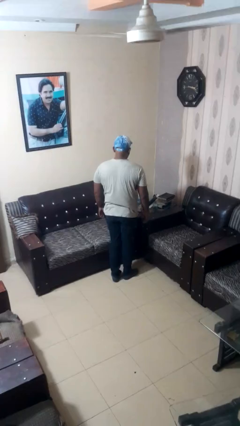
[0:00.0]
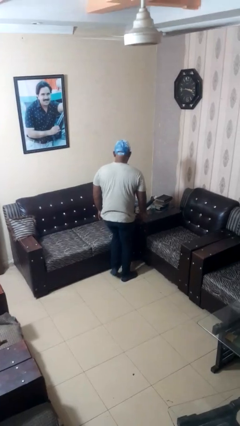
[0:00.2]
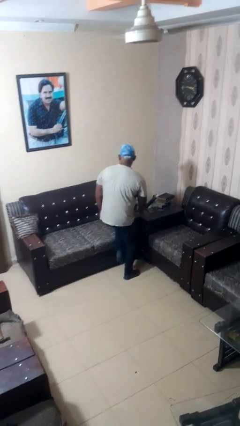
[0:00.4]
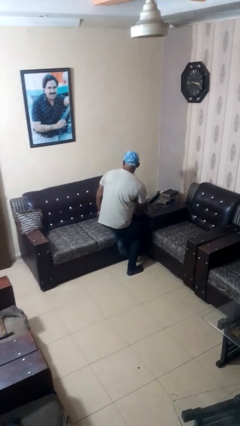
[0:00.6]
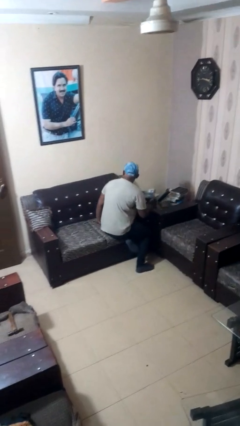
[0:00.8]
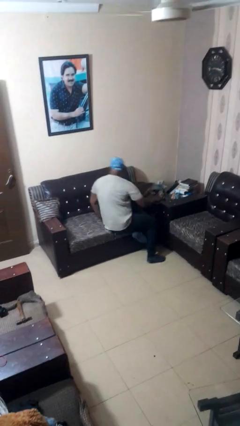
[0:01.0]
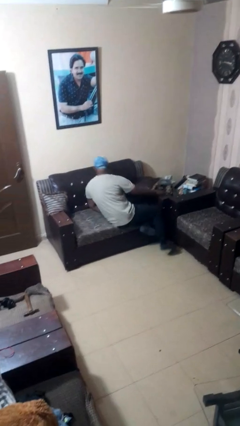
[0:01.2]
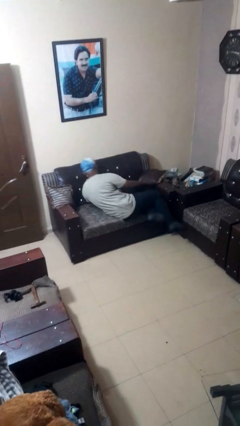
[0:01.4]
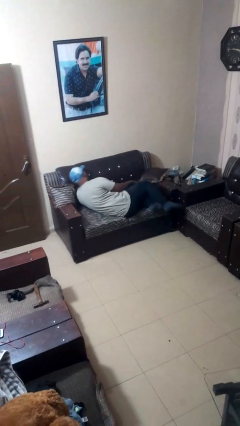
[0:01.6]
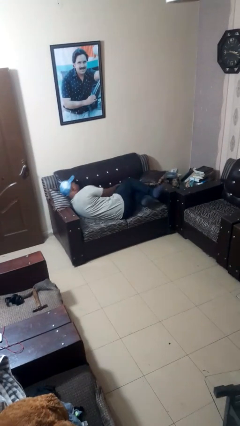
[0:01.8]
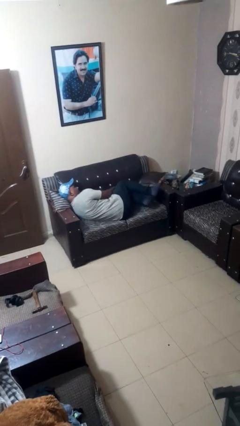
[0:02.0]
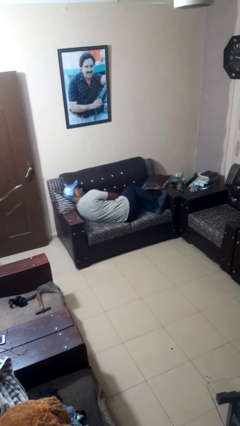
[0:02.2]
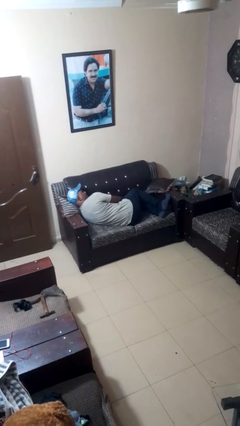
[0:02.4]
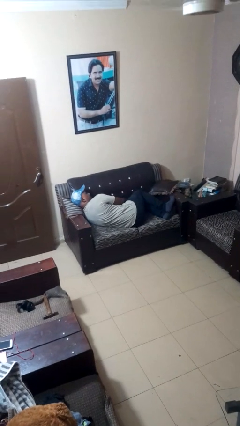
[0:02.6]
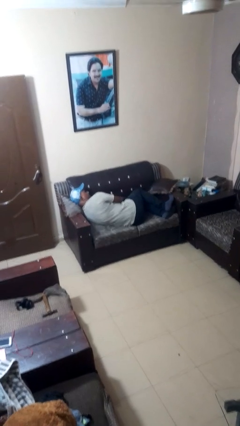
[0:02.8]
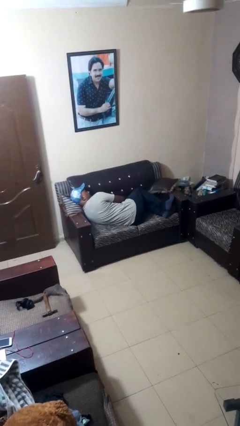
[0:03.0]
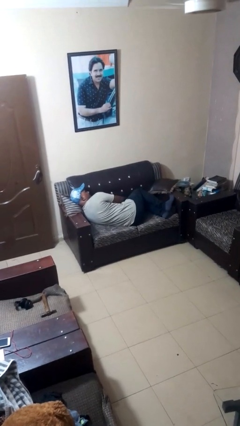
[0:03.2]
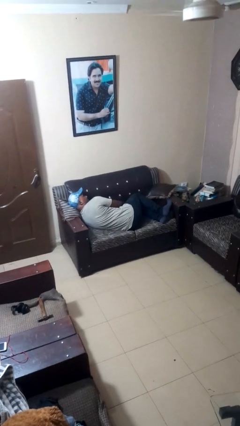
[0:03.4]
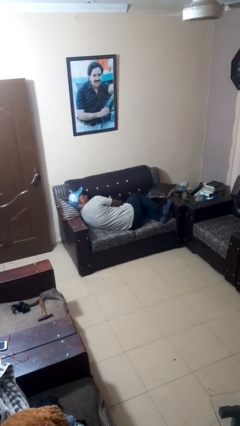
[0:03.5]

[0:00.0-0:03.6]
person lies down on couch

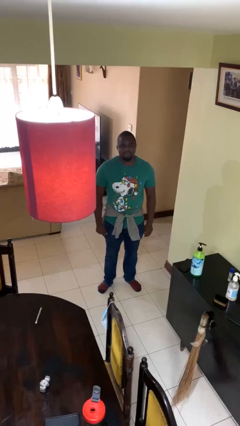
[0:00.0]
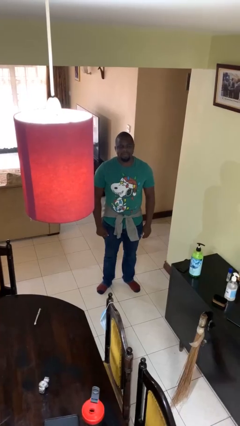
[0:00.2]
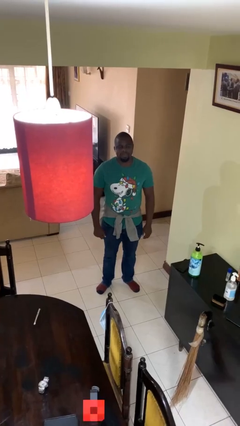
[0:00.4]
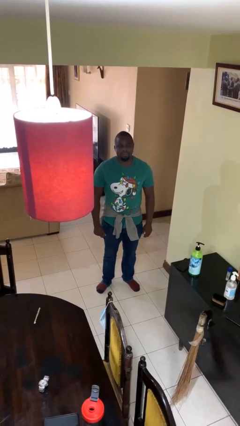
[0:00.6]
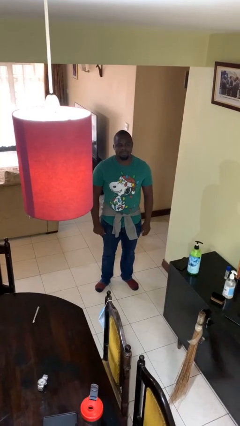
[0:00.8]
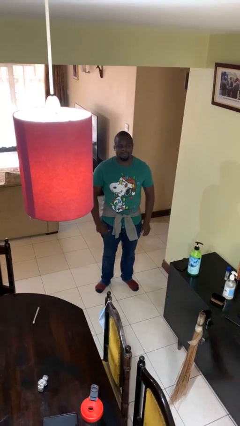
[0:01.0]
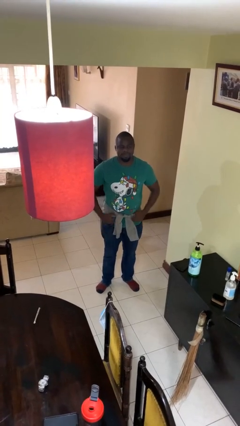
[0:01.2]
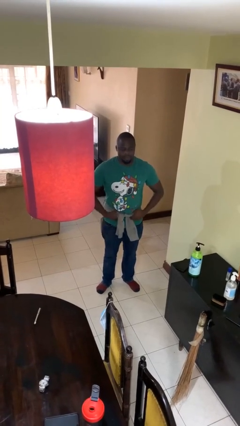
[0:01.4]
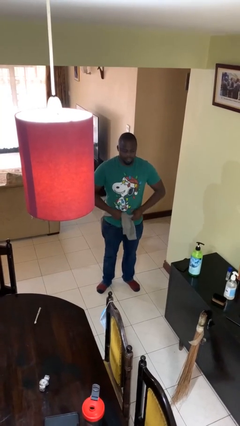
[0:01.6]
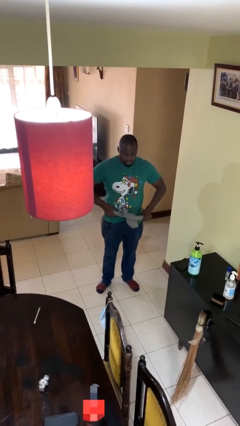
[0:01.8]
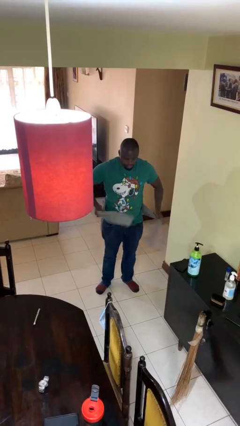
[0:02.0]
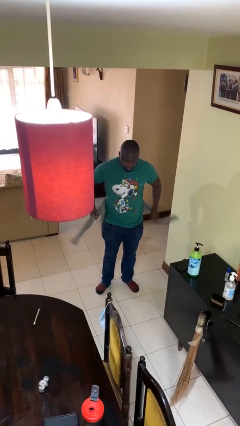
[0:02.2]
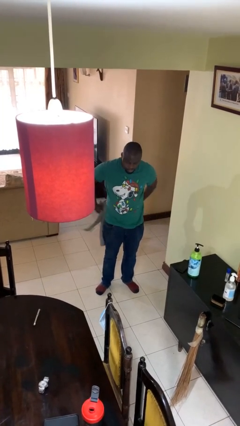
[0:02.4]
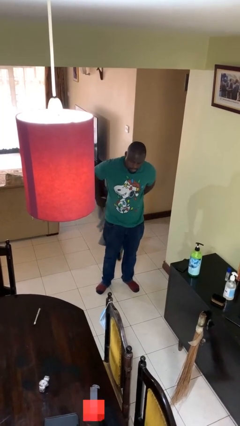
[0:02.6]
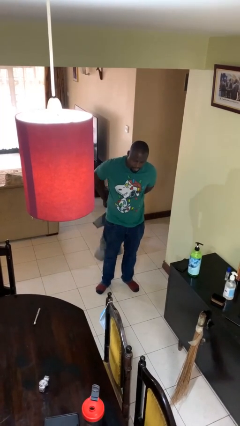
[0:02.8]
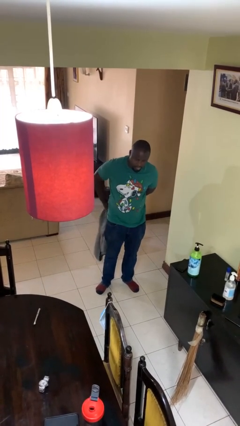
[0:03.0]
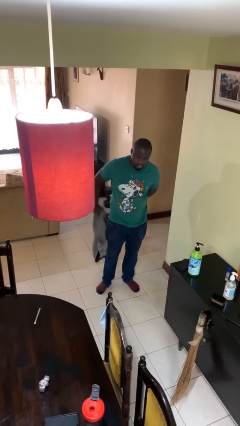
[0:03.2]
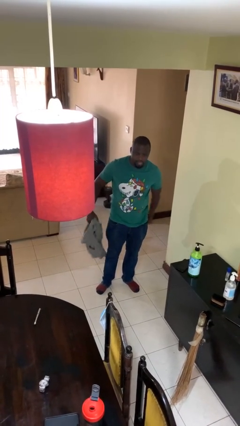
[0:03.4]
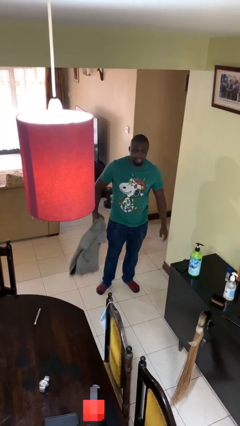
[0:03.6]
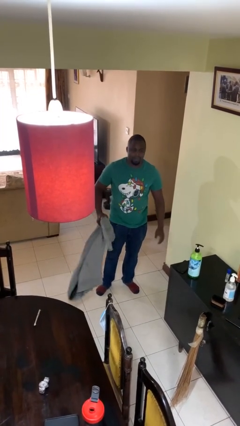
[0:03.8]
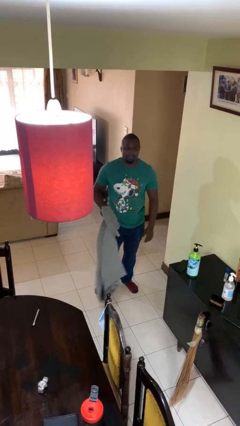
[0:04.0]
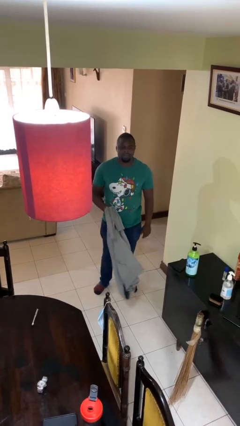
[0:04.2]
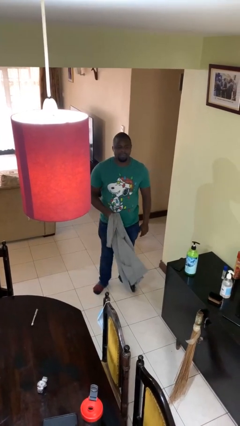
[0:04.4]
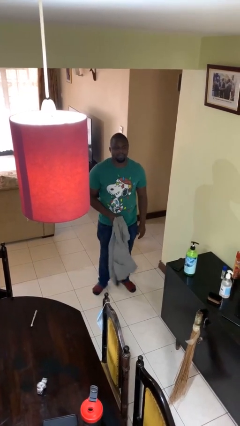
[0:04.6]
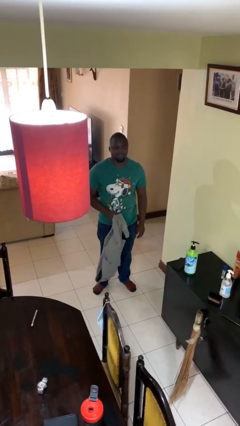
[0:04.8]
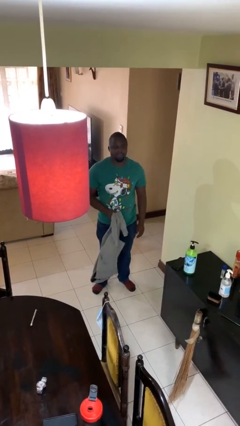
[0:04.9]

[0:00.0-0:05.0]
person unties jacket around waist

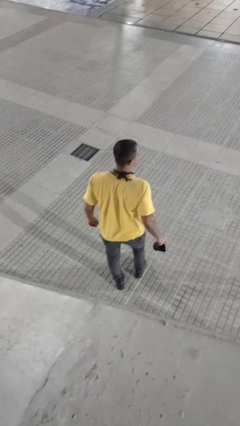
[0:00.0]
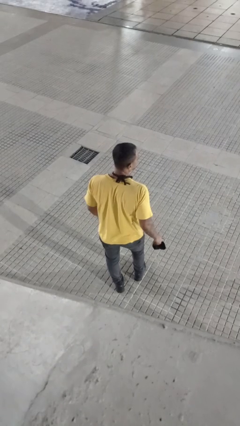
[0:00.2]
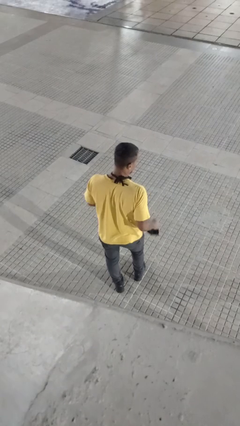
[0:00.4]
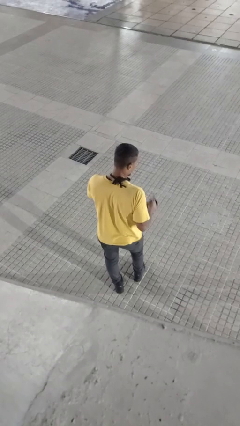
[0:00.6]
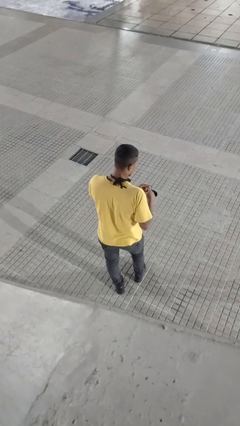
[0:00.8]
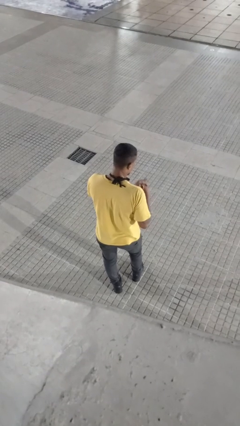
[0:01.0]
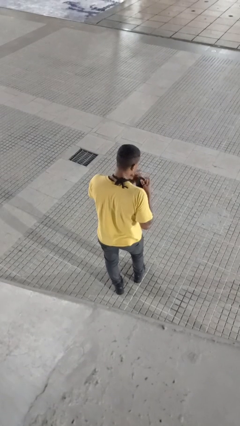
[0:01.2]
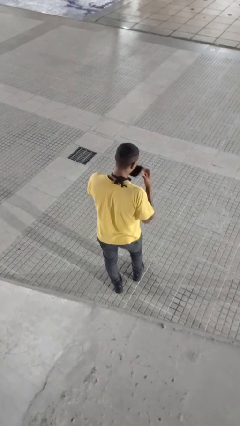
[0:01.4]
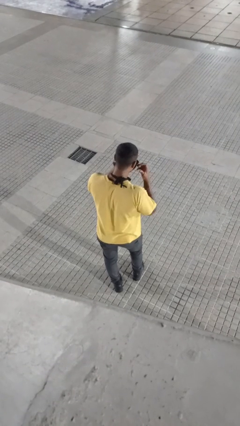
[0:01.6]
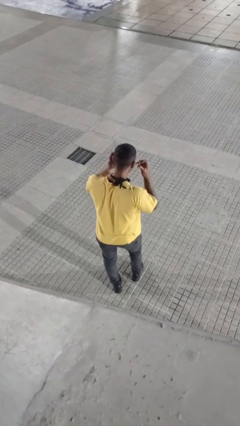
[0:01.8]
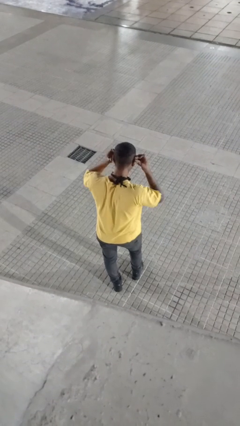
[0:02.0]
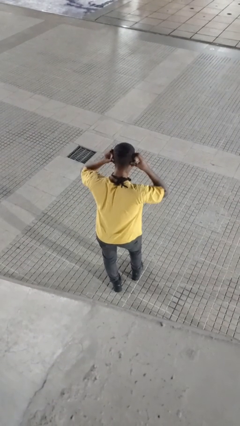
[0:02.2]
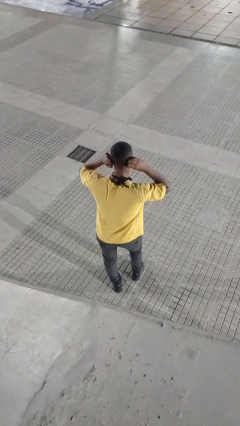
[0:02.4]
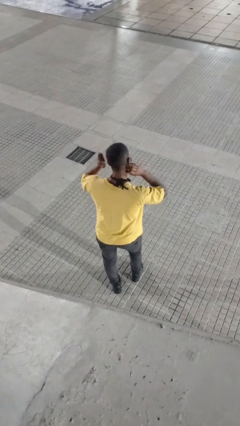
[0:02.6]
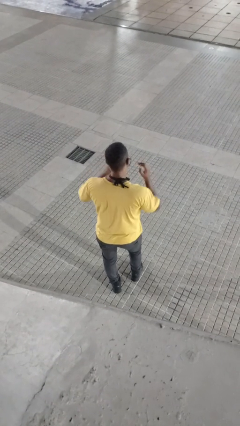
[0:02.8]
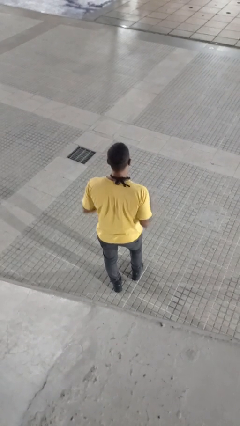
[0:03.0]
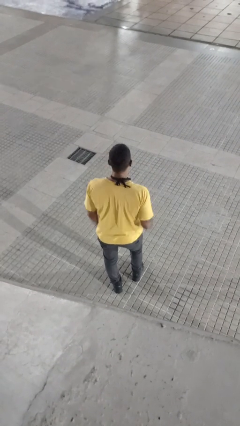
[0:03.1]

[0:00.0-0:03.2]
person puts on facemask

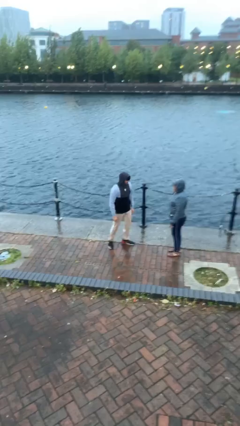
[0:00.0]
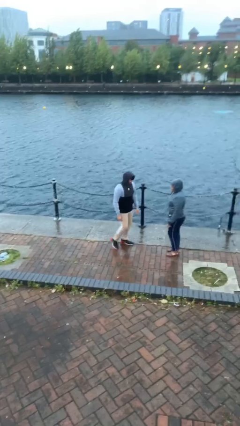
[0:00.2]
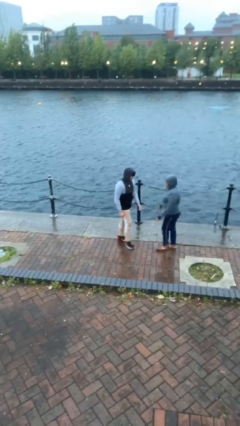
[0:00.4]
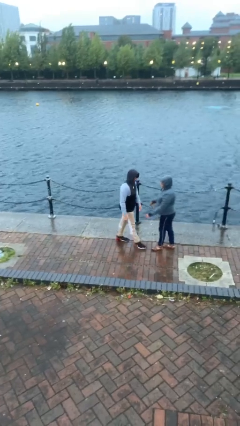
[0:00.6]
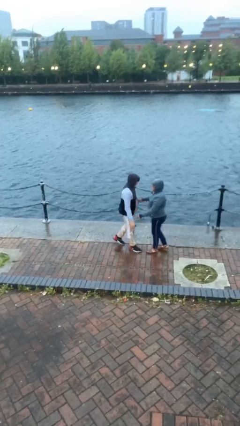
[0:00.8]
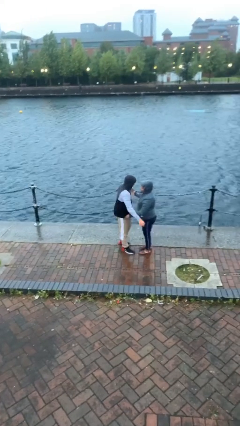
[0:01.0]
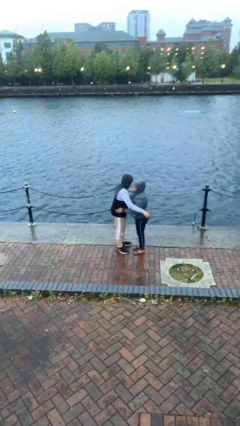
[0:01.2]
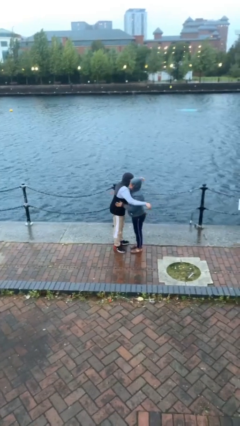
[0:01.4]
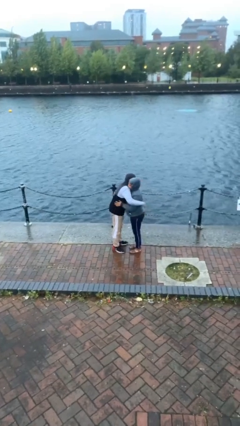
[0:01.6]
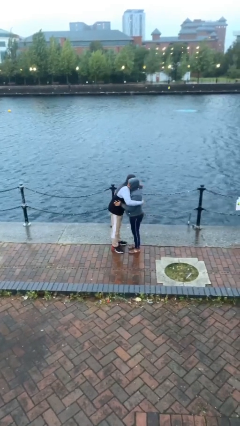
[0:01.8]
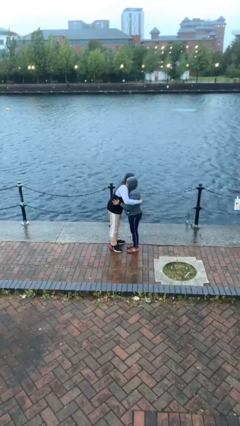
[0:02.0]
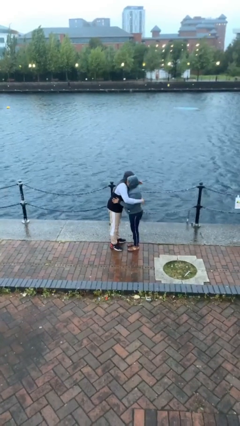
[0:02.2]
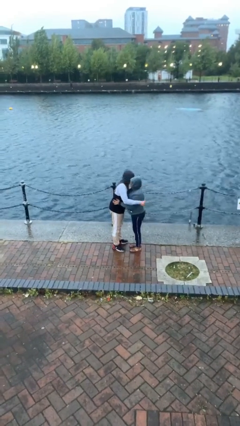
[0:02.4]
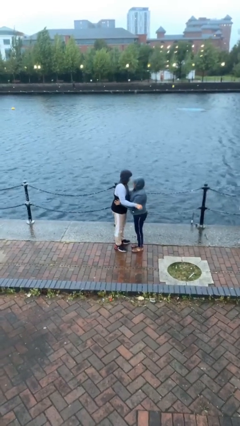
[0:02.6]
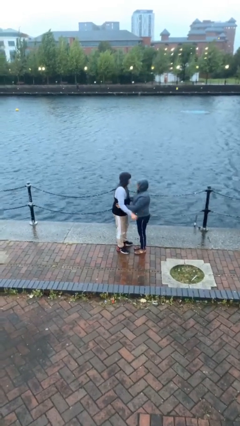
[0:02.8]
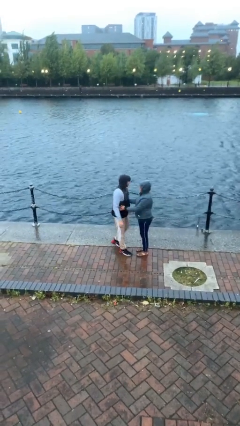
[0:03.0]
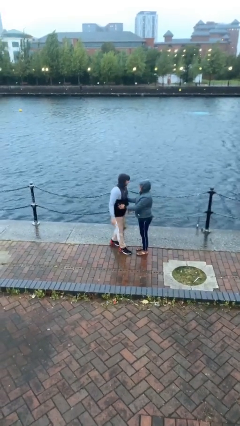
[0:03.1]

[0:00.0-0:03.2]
person embraces person

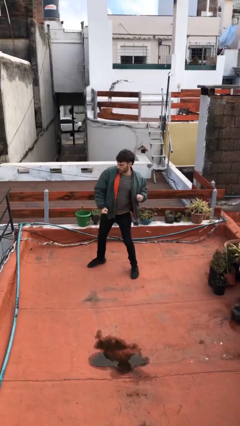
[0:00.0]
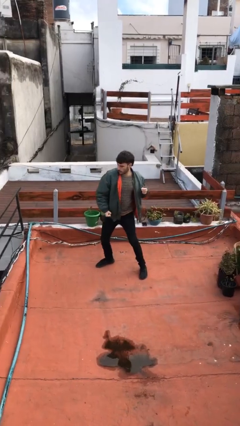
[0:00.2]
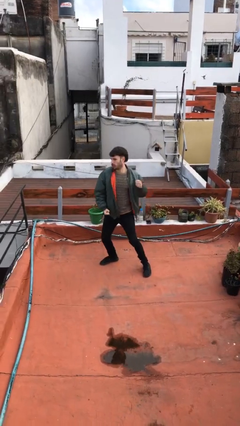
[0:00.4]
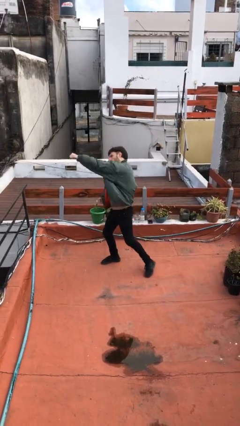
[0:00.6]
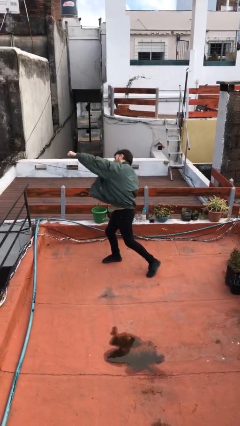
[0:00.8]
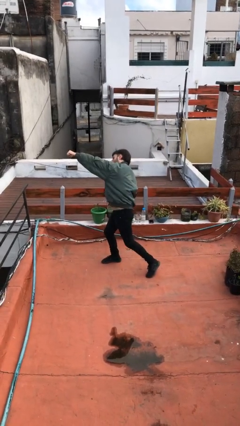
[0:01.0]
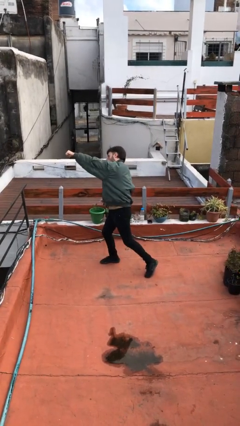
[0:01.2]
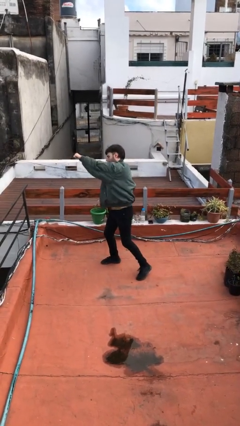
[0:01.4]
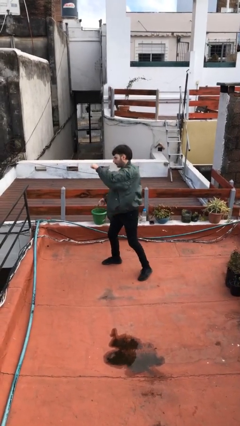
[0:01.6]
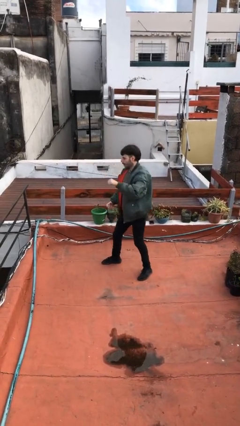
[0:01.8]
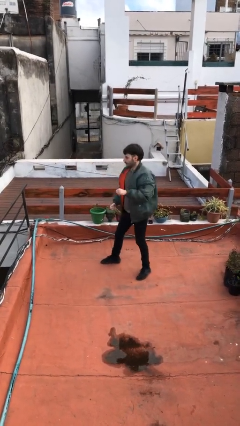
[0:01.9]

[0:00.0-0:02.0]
person punches

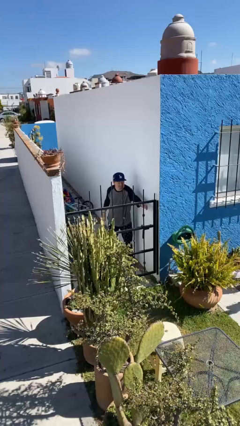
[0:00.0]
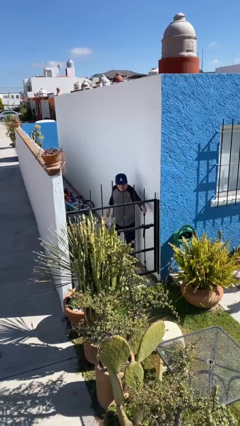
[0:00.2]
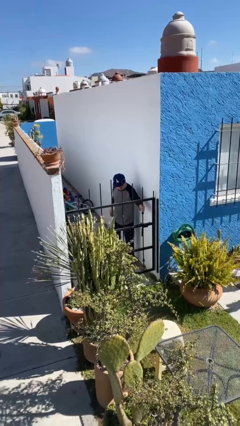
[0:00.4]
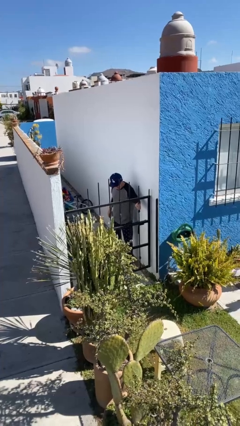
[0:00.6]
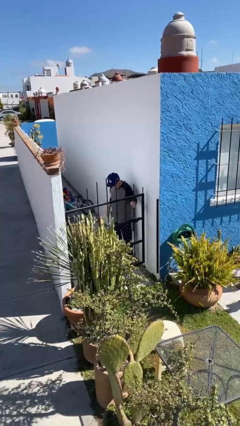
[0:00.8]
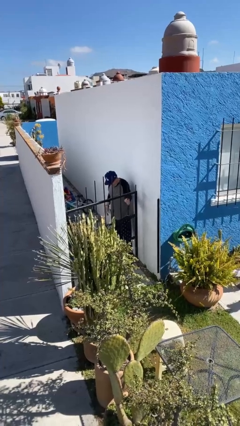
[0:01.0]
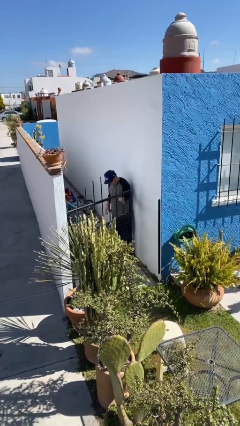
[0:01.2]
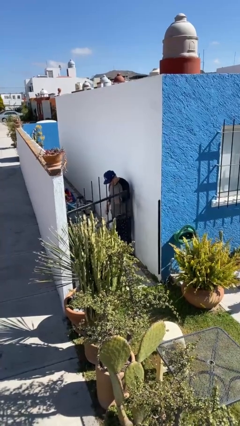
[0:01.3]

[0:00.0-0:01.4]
person opens facility door
